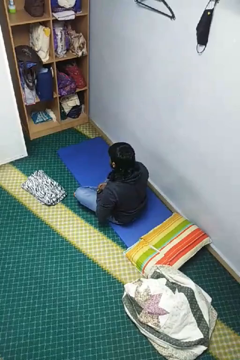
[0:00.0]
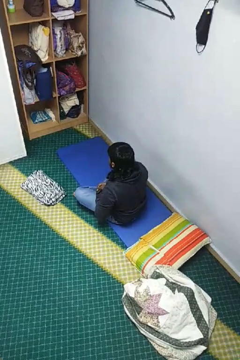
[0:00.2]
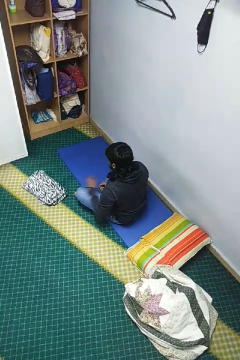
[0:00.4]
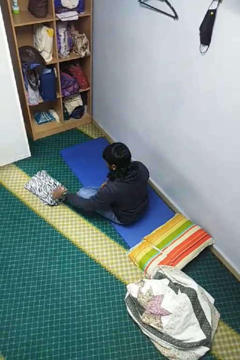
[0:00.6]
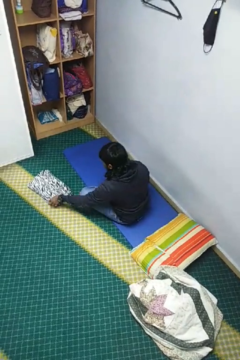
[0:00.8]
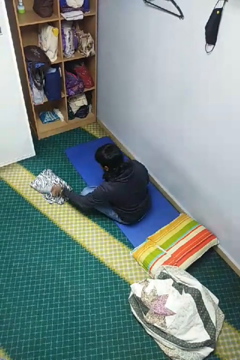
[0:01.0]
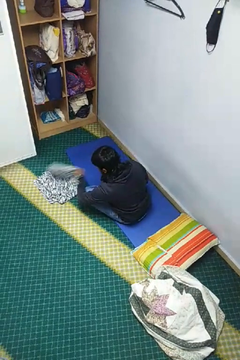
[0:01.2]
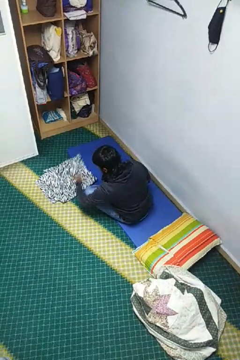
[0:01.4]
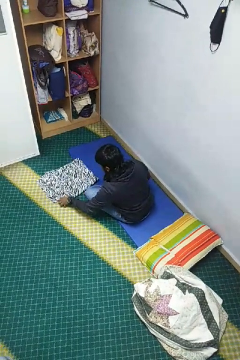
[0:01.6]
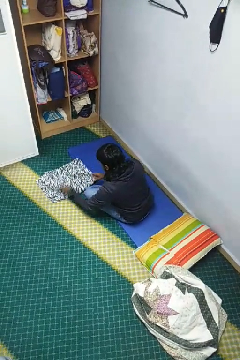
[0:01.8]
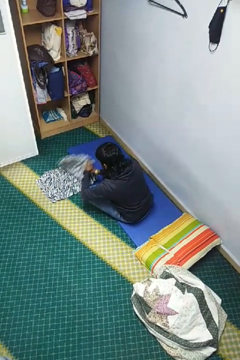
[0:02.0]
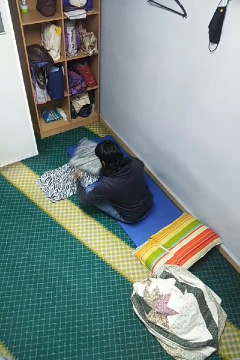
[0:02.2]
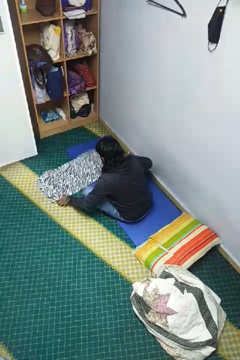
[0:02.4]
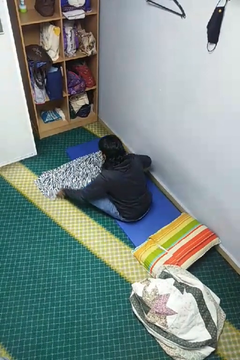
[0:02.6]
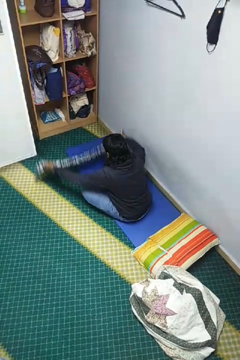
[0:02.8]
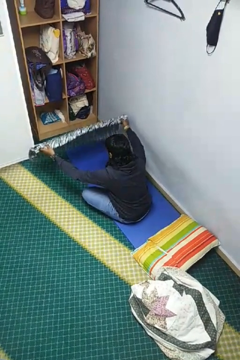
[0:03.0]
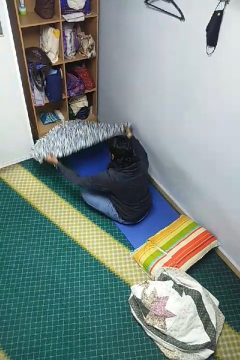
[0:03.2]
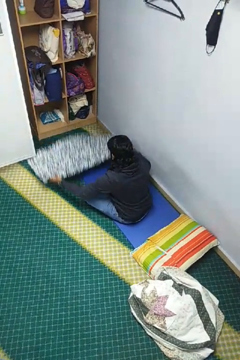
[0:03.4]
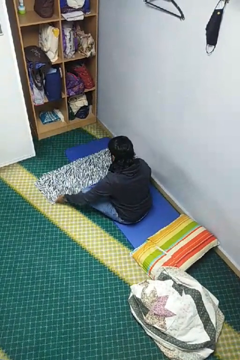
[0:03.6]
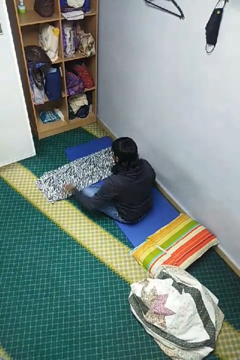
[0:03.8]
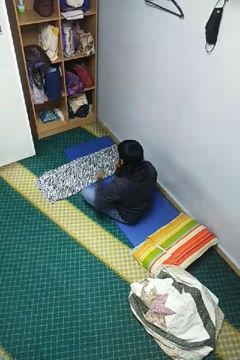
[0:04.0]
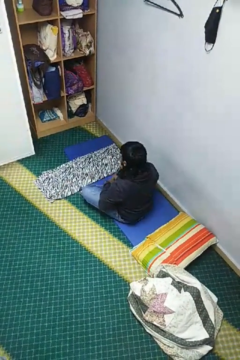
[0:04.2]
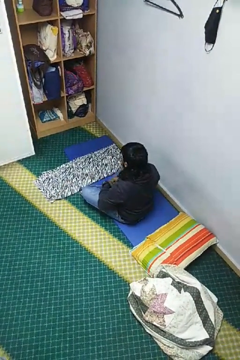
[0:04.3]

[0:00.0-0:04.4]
person unfolds blanket

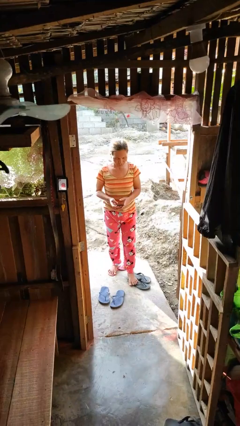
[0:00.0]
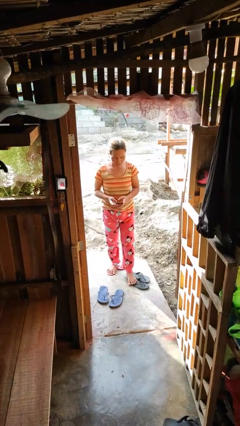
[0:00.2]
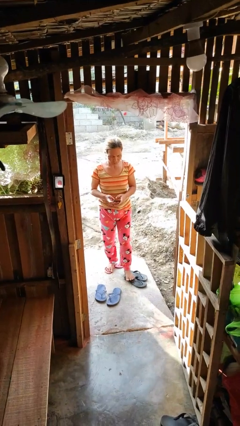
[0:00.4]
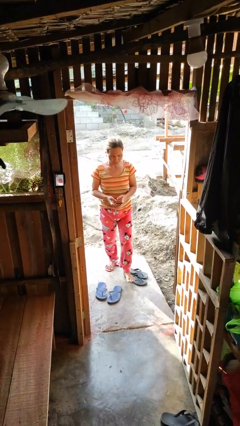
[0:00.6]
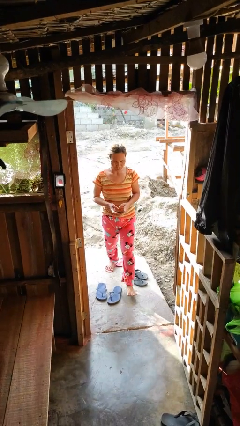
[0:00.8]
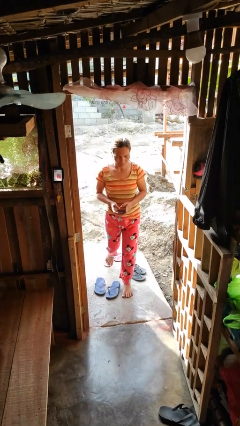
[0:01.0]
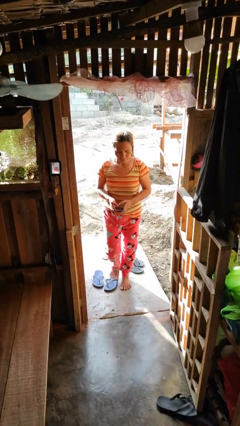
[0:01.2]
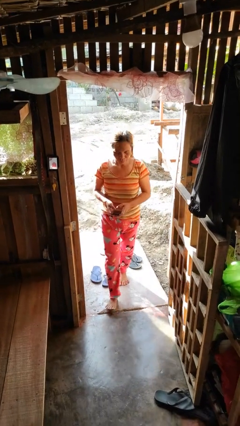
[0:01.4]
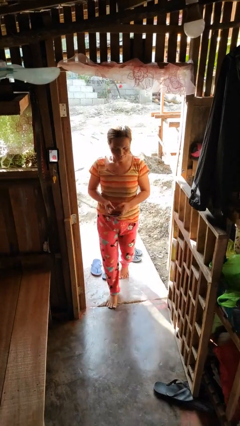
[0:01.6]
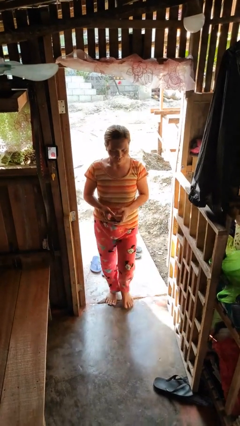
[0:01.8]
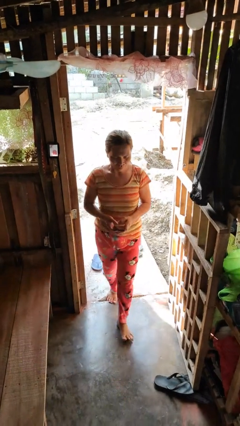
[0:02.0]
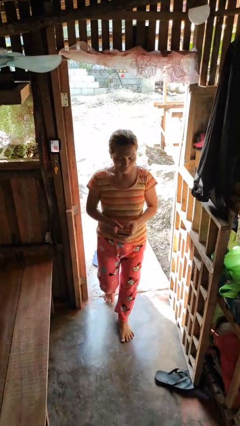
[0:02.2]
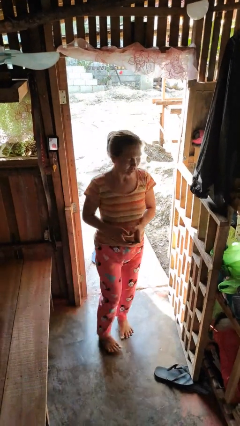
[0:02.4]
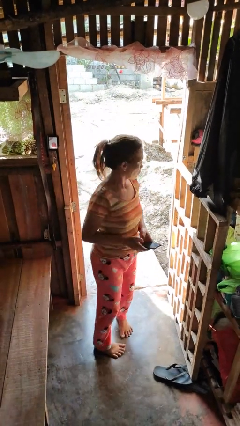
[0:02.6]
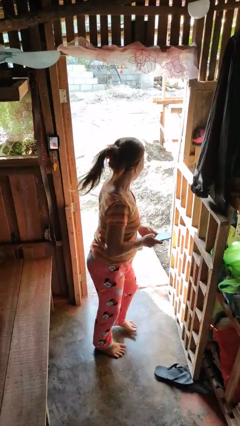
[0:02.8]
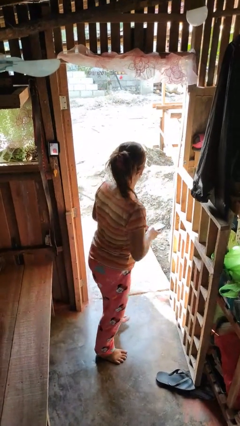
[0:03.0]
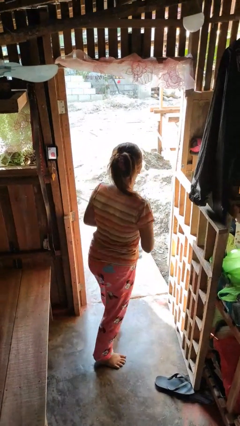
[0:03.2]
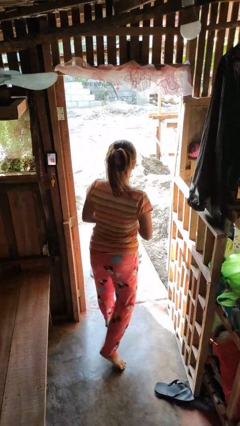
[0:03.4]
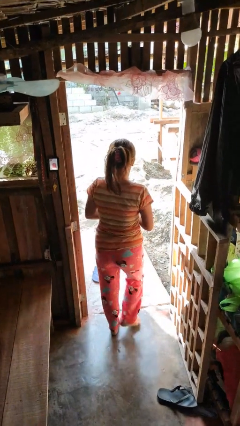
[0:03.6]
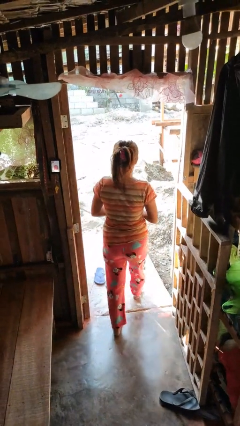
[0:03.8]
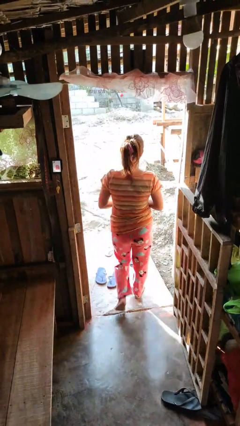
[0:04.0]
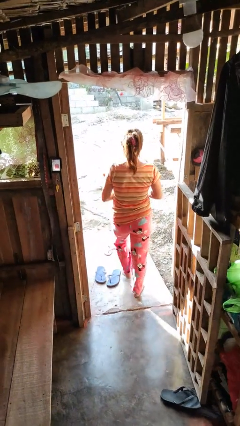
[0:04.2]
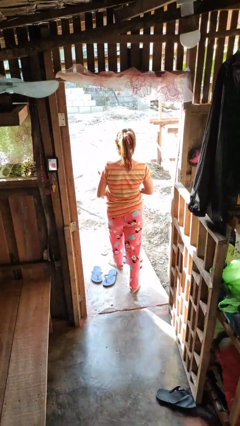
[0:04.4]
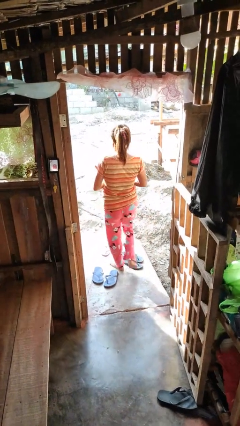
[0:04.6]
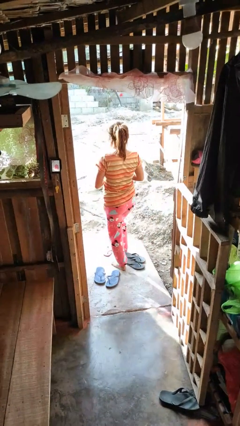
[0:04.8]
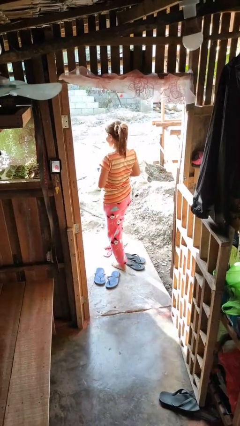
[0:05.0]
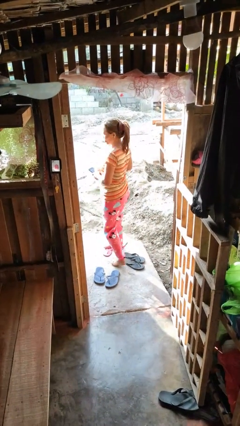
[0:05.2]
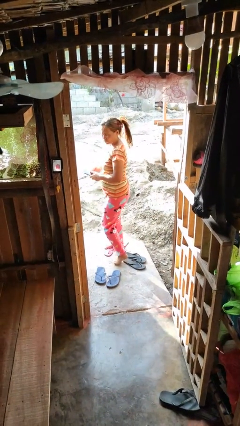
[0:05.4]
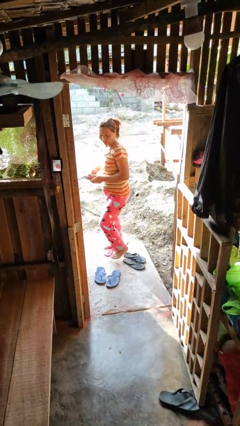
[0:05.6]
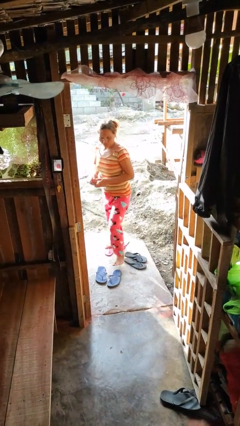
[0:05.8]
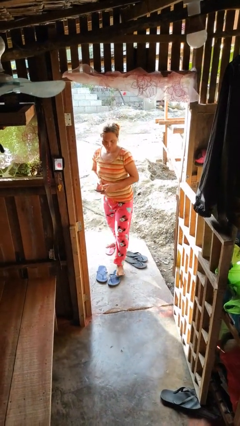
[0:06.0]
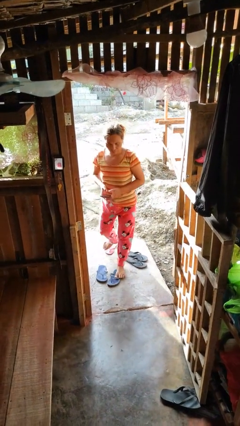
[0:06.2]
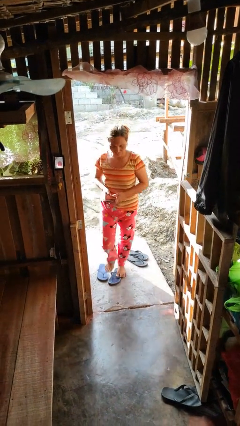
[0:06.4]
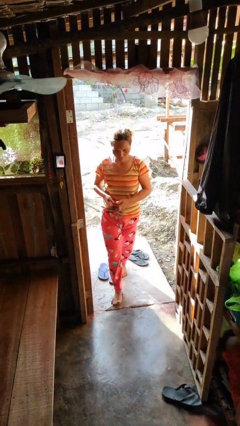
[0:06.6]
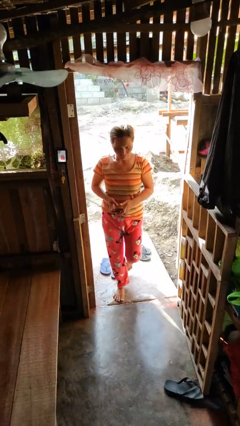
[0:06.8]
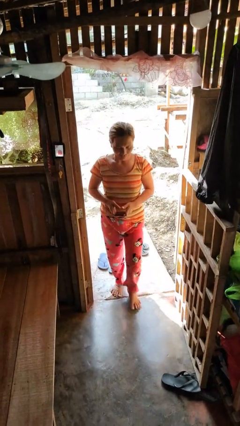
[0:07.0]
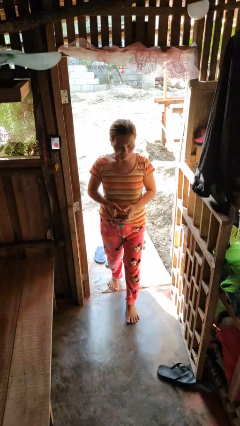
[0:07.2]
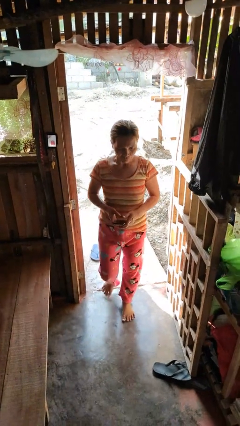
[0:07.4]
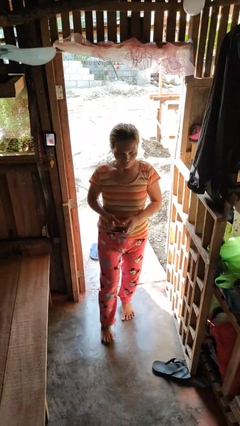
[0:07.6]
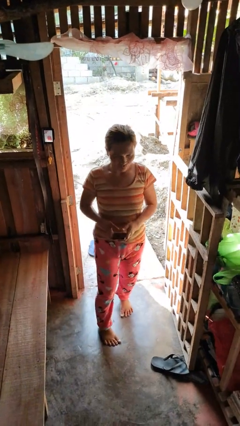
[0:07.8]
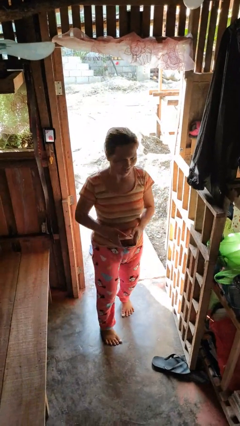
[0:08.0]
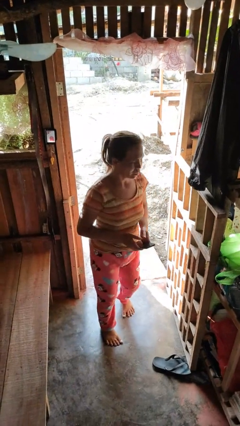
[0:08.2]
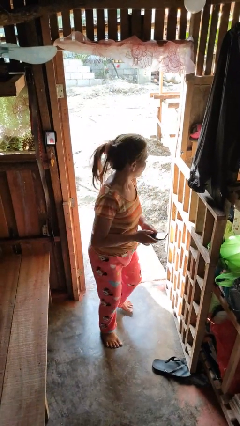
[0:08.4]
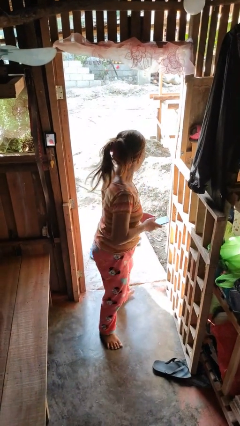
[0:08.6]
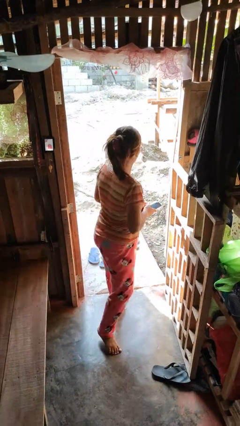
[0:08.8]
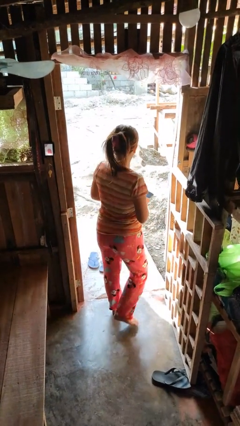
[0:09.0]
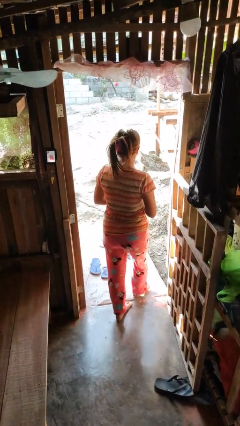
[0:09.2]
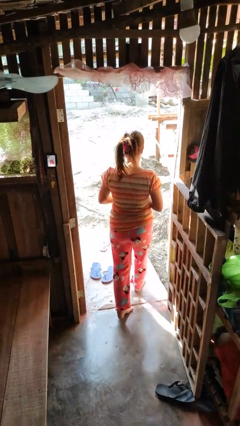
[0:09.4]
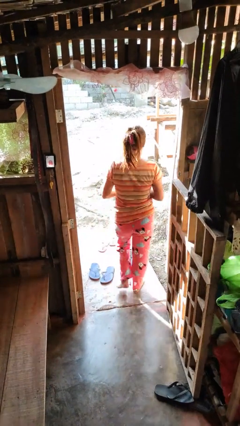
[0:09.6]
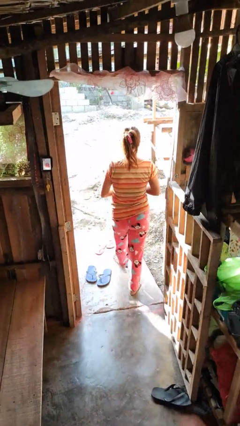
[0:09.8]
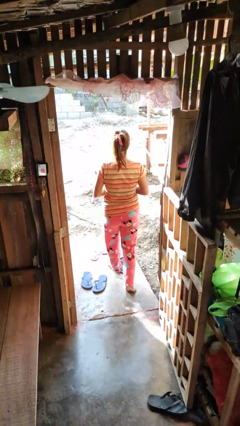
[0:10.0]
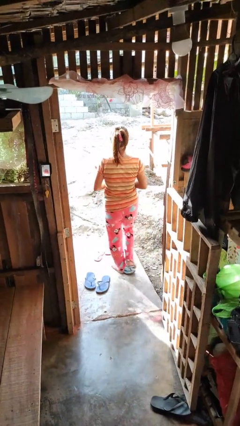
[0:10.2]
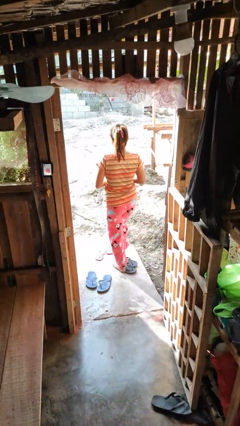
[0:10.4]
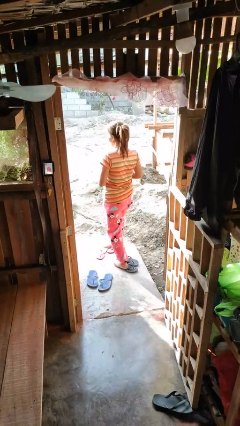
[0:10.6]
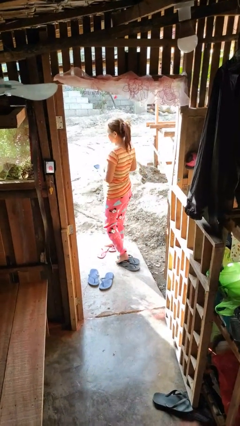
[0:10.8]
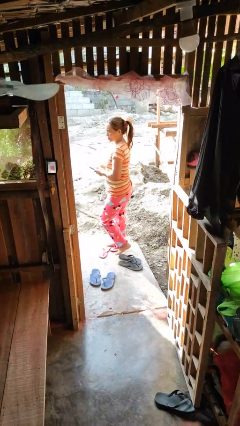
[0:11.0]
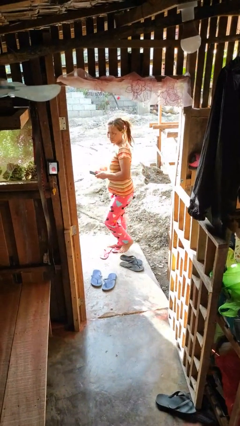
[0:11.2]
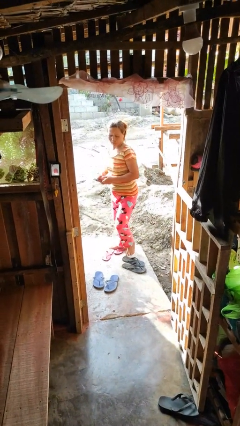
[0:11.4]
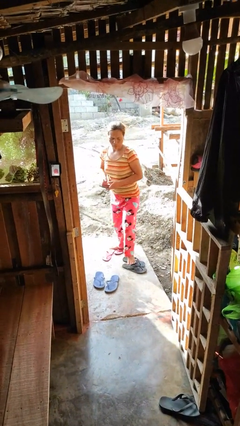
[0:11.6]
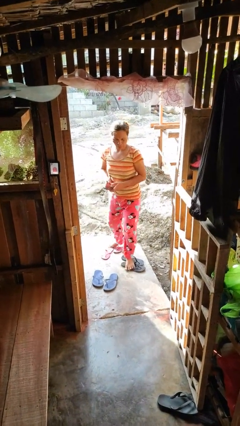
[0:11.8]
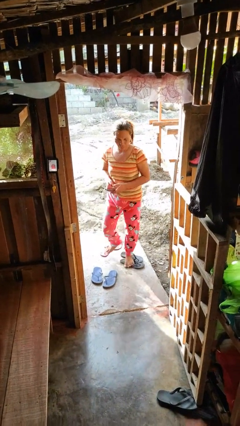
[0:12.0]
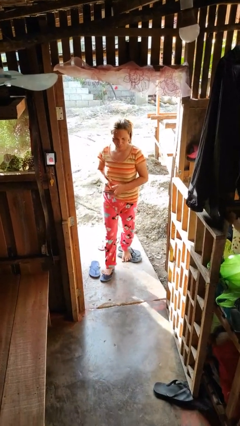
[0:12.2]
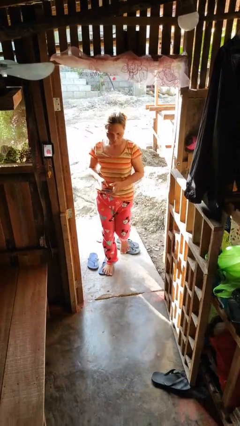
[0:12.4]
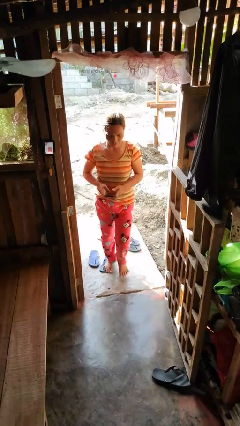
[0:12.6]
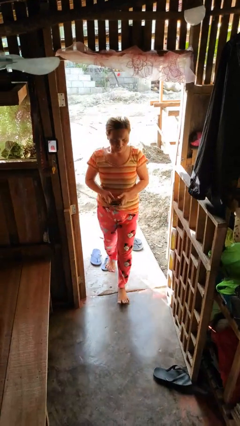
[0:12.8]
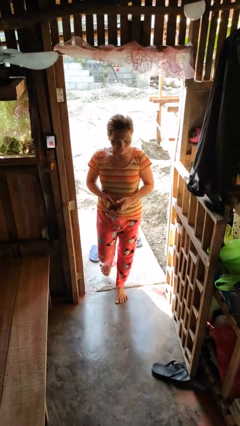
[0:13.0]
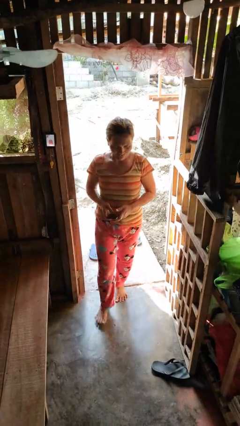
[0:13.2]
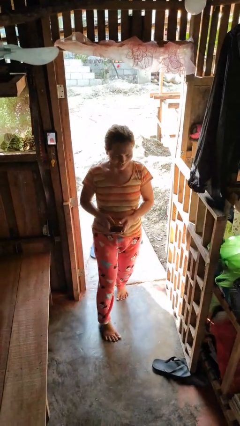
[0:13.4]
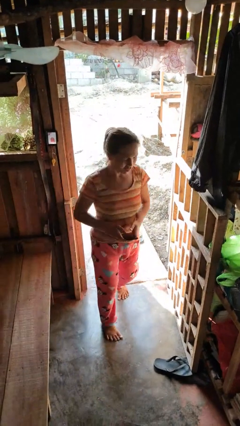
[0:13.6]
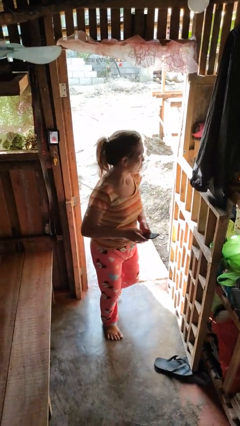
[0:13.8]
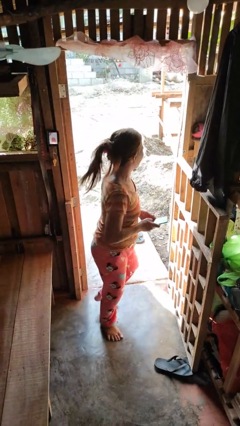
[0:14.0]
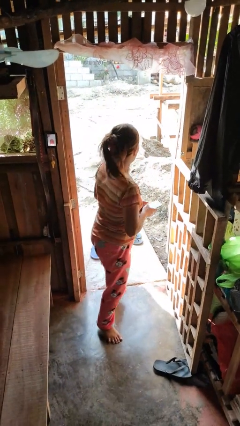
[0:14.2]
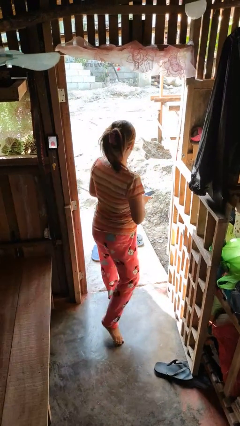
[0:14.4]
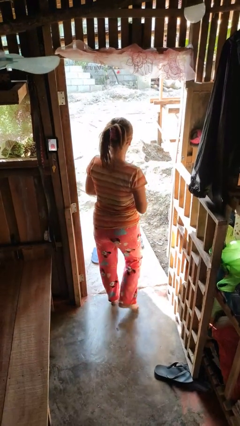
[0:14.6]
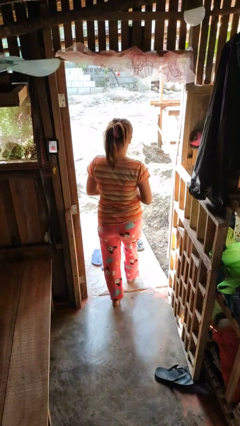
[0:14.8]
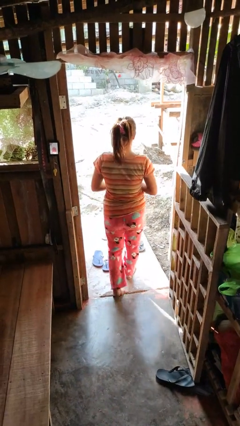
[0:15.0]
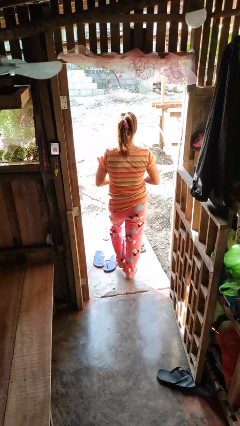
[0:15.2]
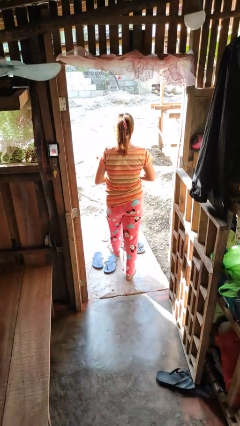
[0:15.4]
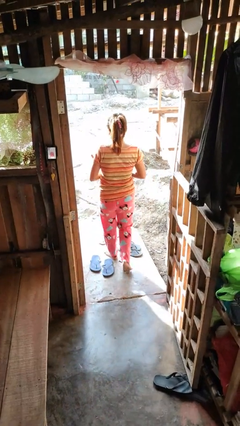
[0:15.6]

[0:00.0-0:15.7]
person texts on phone
